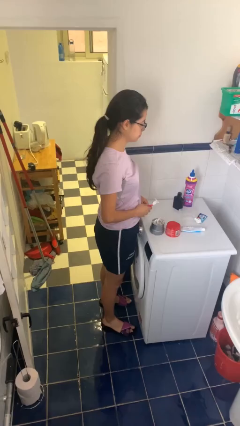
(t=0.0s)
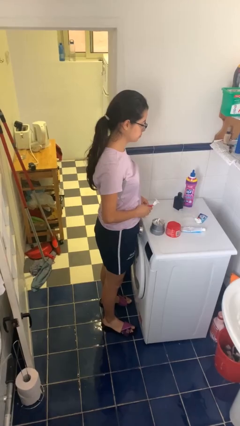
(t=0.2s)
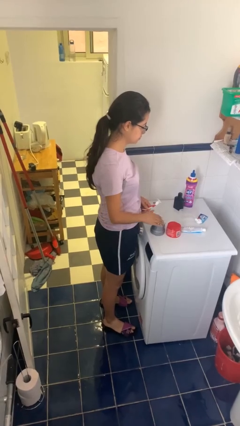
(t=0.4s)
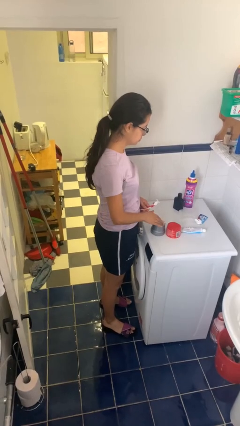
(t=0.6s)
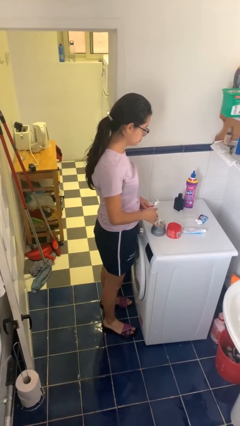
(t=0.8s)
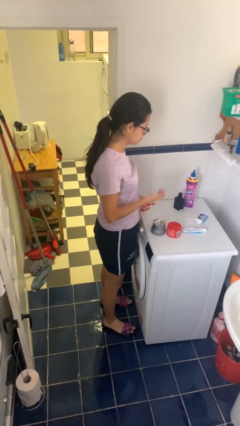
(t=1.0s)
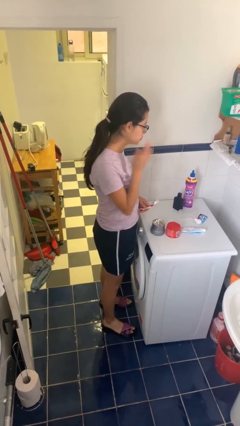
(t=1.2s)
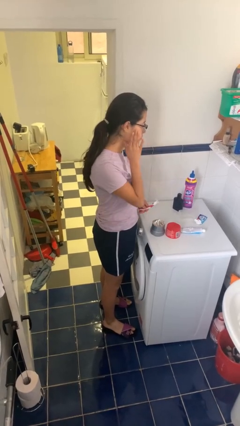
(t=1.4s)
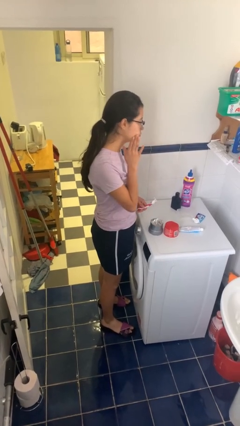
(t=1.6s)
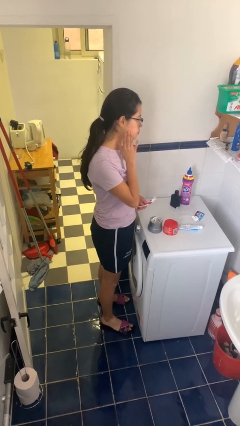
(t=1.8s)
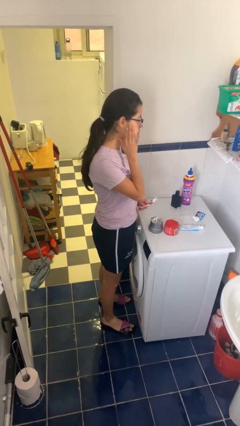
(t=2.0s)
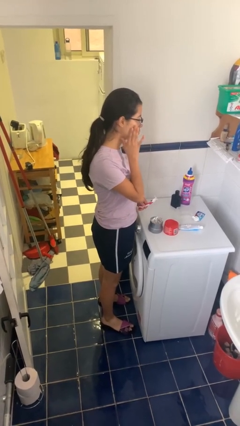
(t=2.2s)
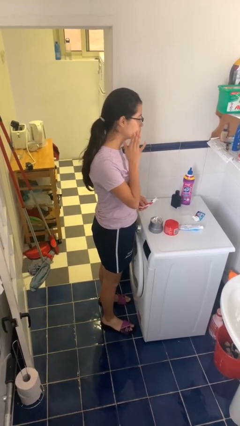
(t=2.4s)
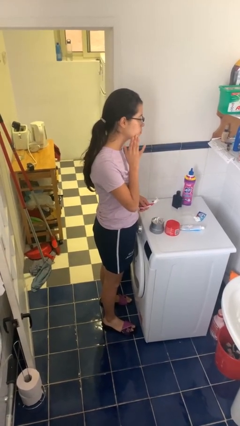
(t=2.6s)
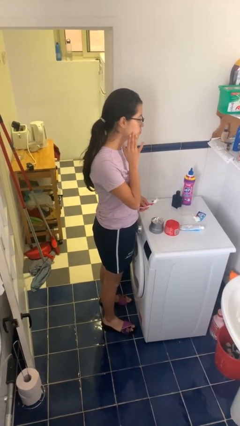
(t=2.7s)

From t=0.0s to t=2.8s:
person applies shaving cream

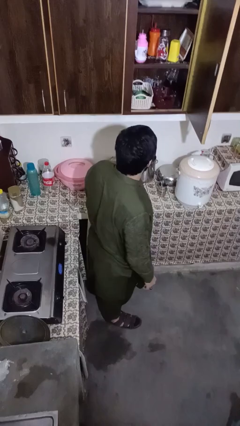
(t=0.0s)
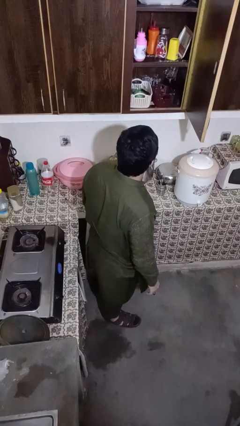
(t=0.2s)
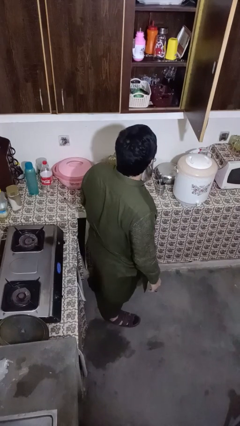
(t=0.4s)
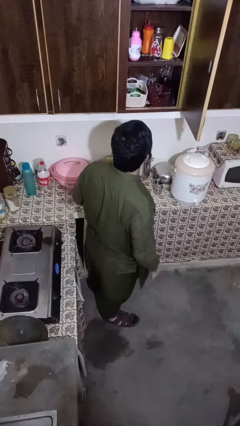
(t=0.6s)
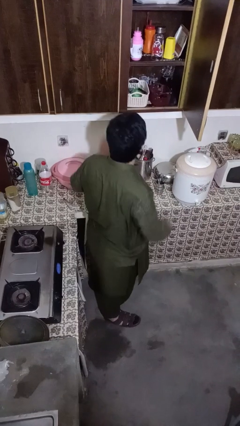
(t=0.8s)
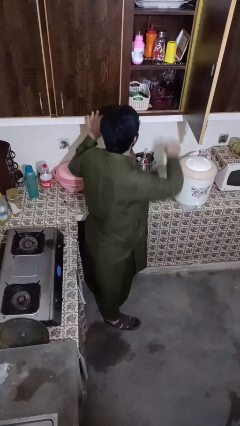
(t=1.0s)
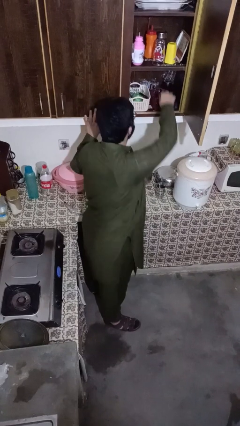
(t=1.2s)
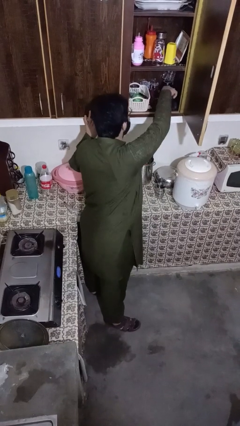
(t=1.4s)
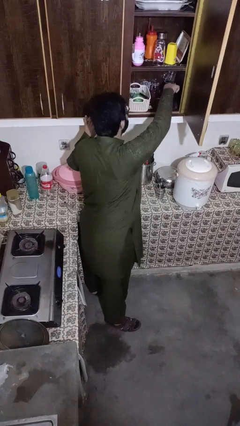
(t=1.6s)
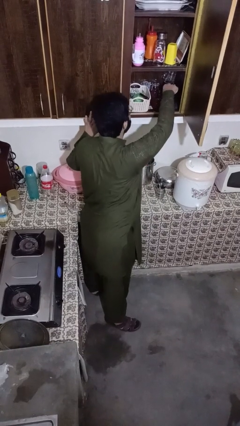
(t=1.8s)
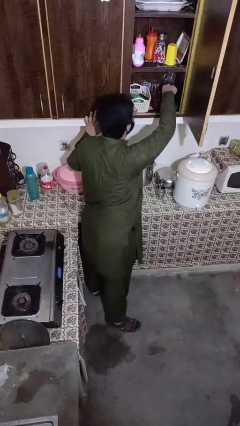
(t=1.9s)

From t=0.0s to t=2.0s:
person searches in kitchen drawer

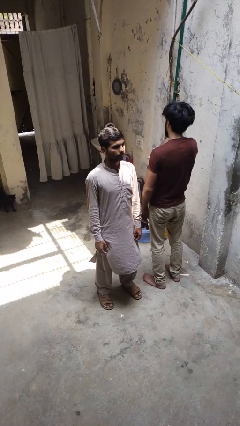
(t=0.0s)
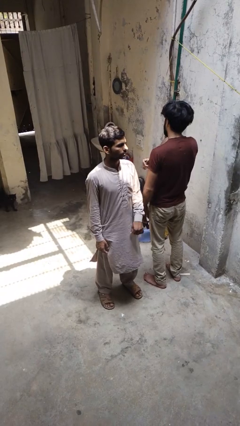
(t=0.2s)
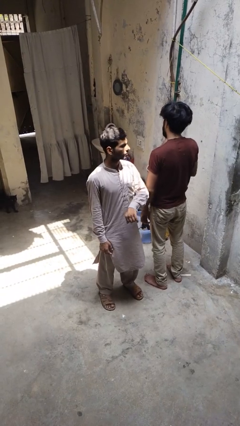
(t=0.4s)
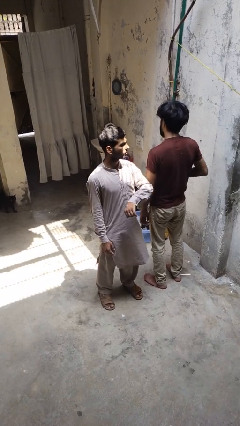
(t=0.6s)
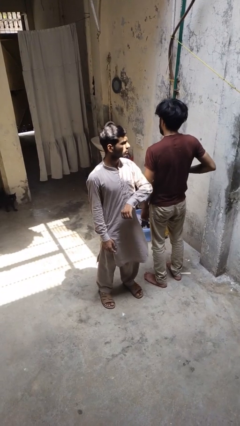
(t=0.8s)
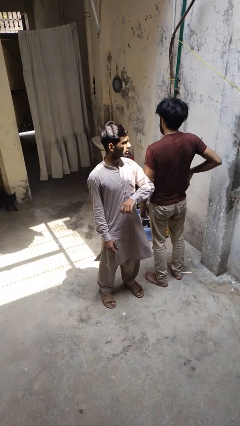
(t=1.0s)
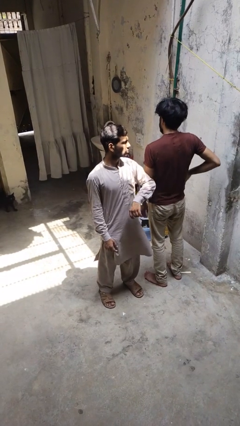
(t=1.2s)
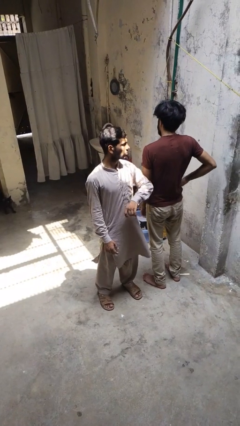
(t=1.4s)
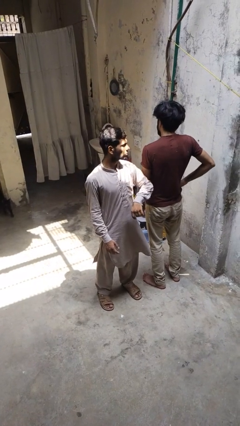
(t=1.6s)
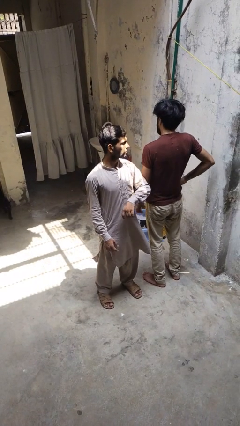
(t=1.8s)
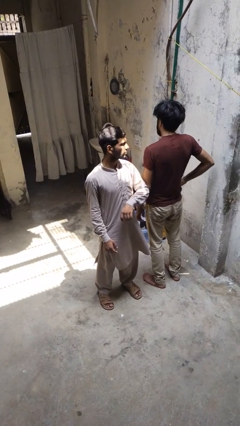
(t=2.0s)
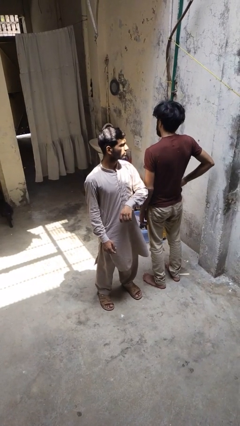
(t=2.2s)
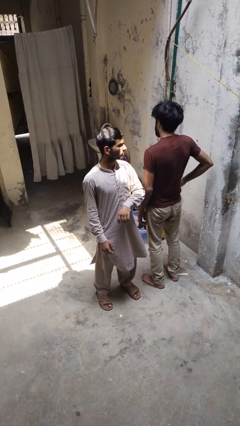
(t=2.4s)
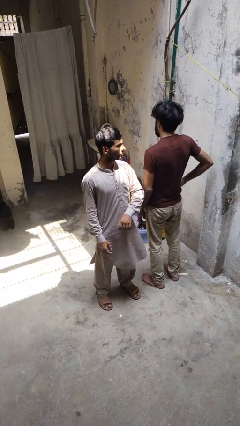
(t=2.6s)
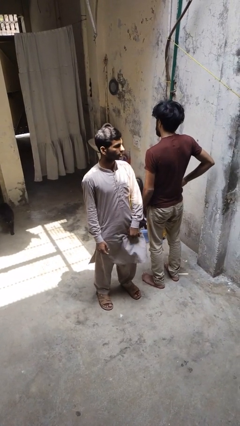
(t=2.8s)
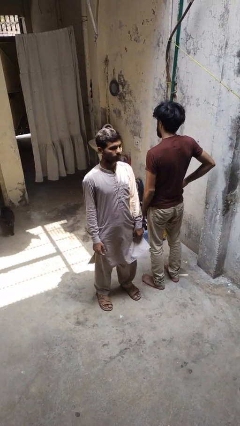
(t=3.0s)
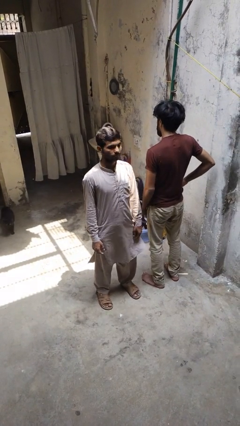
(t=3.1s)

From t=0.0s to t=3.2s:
person nudges person with elbow

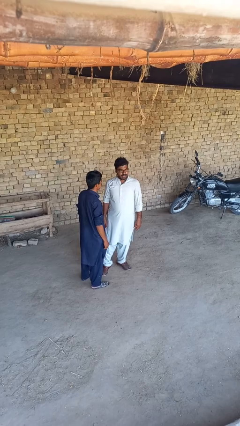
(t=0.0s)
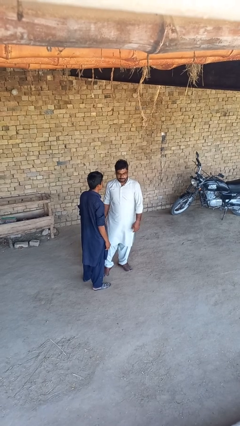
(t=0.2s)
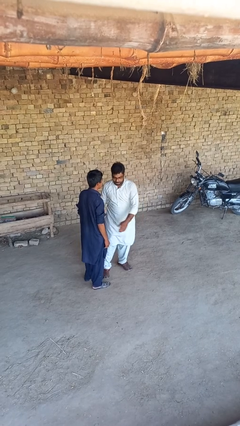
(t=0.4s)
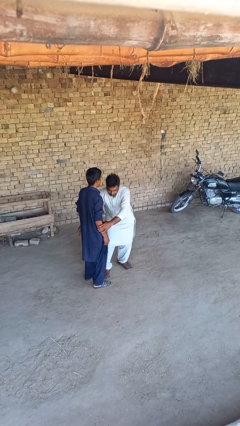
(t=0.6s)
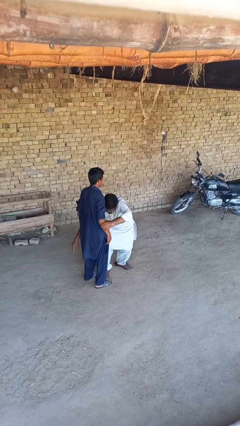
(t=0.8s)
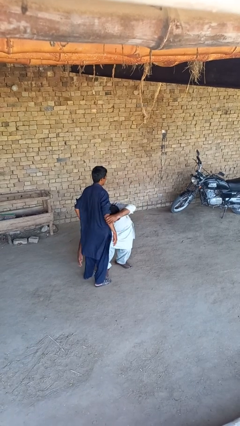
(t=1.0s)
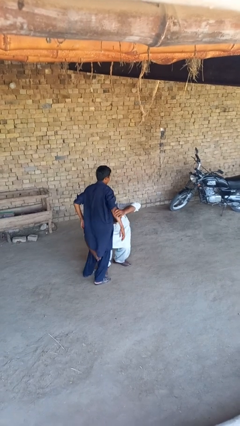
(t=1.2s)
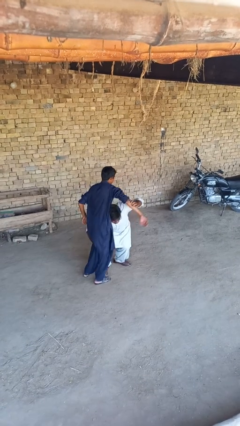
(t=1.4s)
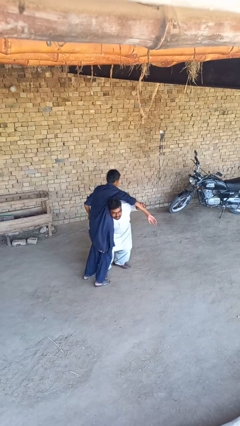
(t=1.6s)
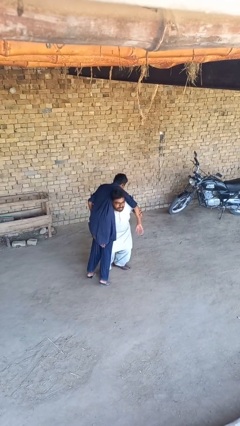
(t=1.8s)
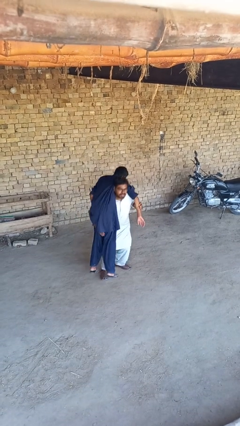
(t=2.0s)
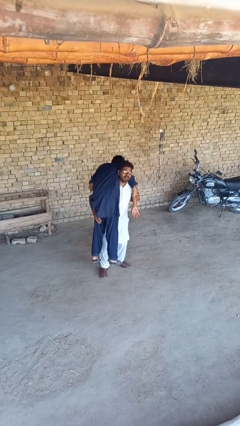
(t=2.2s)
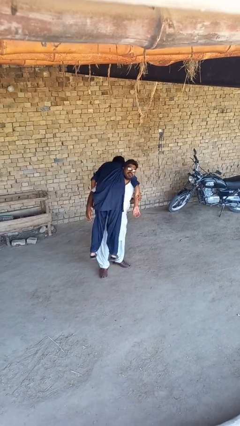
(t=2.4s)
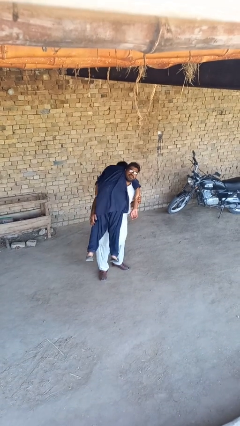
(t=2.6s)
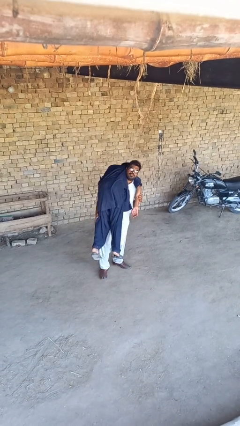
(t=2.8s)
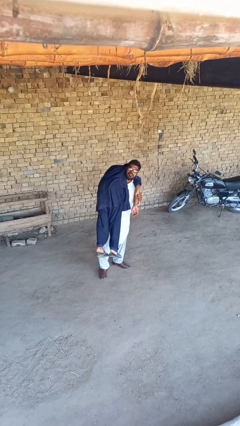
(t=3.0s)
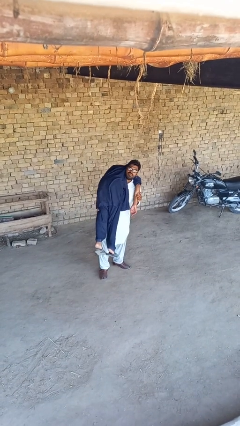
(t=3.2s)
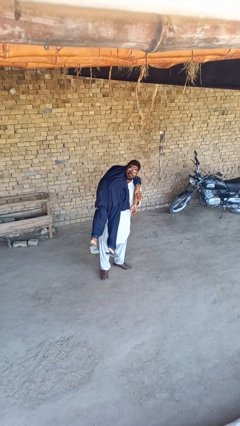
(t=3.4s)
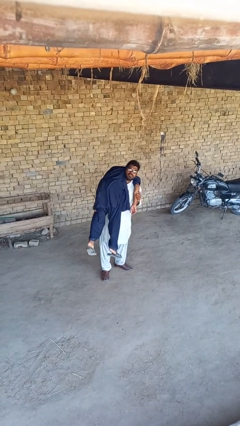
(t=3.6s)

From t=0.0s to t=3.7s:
person carries person over shoulder

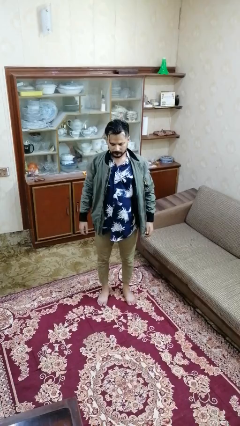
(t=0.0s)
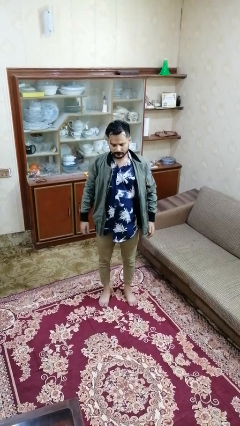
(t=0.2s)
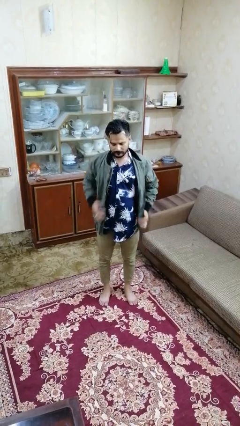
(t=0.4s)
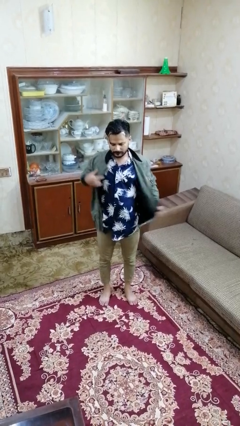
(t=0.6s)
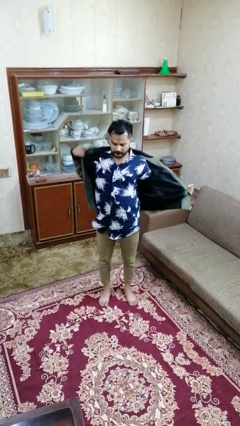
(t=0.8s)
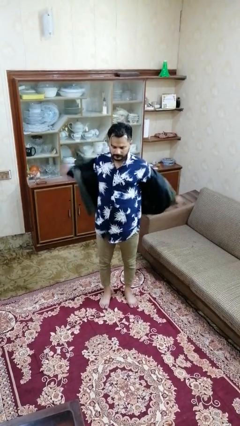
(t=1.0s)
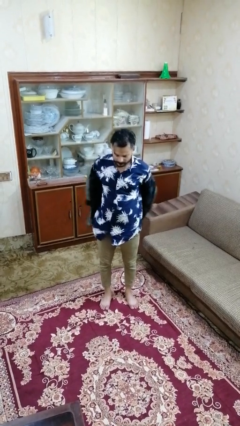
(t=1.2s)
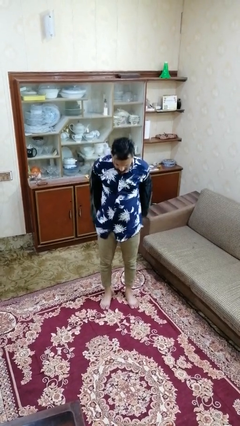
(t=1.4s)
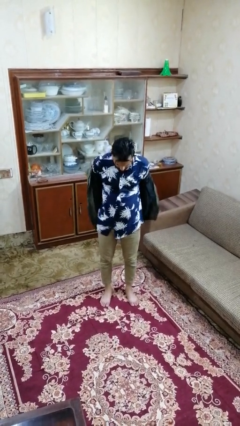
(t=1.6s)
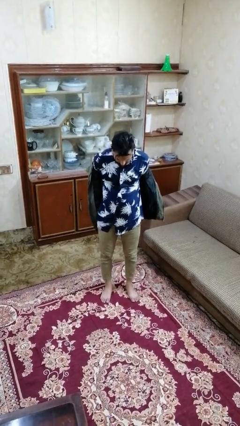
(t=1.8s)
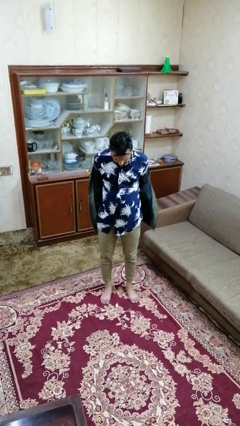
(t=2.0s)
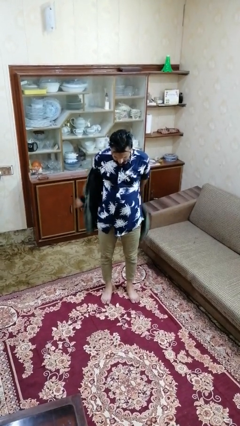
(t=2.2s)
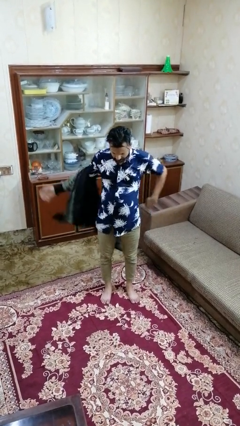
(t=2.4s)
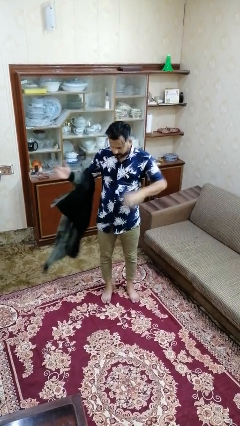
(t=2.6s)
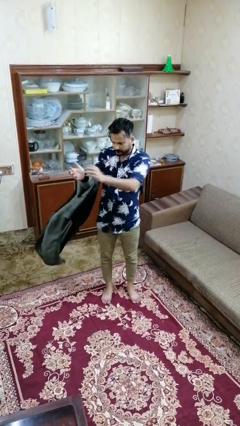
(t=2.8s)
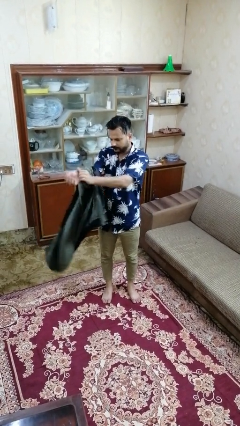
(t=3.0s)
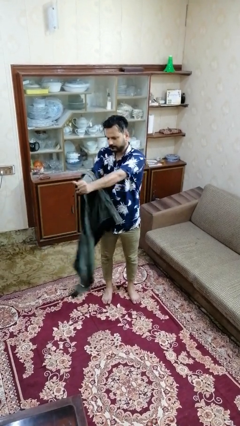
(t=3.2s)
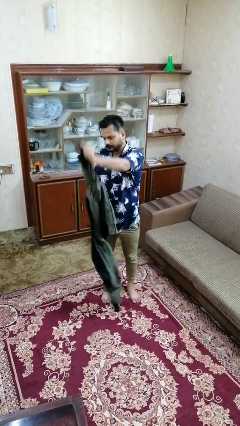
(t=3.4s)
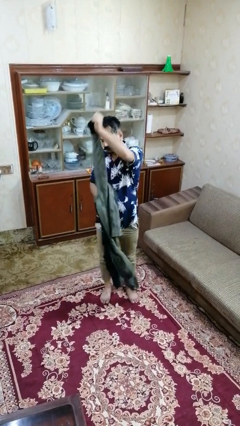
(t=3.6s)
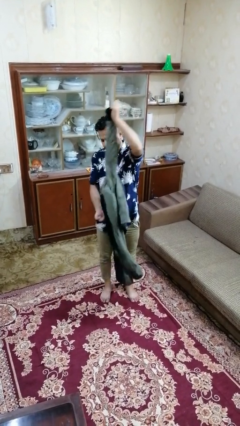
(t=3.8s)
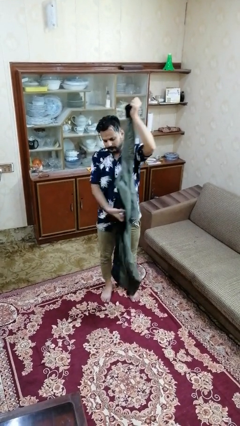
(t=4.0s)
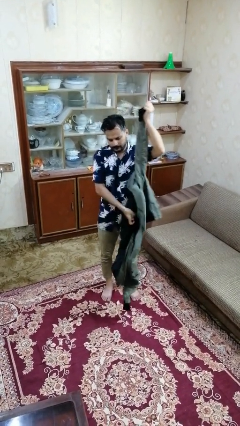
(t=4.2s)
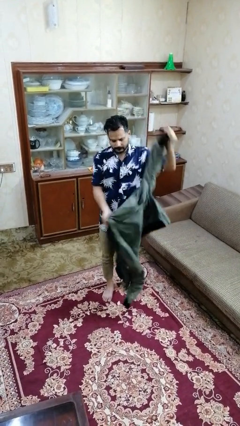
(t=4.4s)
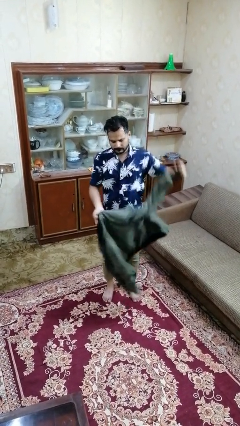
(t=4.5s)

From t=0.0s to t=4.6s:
person takes off jacket

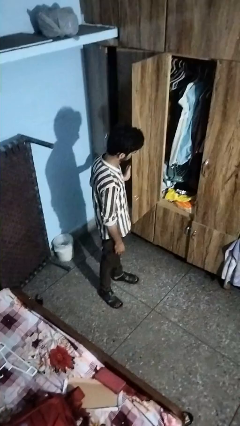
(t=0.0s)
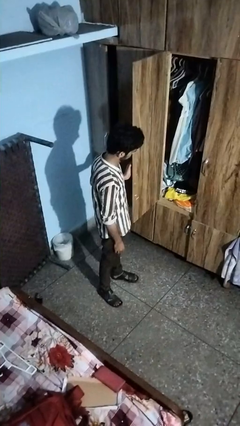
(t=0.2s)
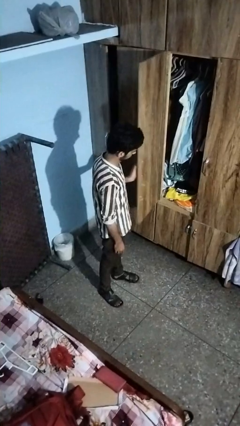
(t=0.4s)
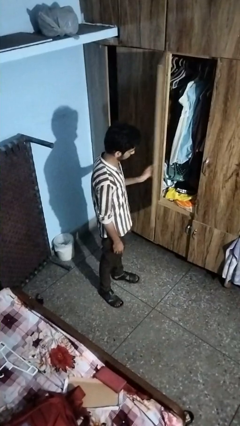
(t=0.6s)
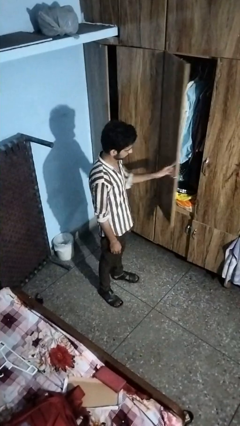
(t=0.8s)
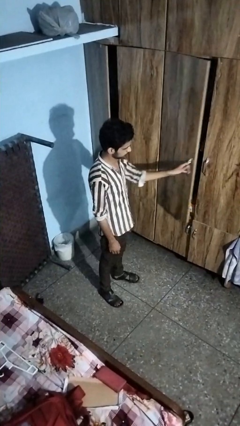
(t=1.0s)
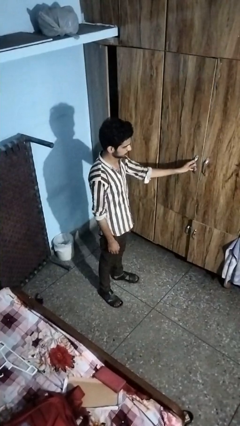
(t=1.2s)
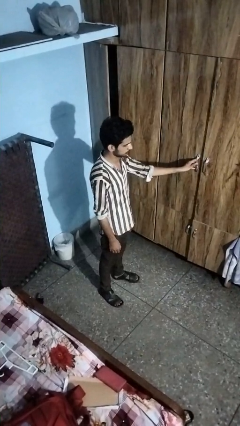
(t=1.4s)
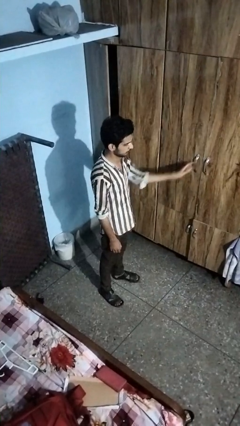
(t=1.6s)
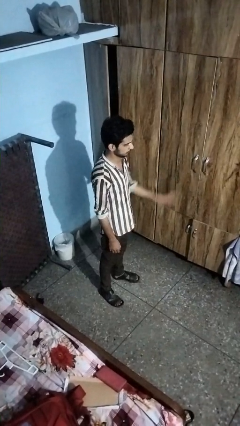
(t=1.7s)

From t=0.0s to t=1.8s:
person closes closet door
